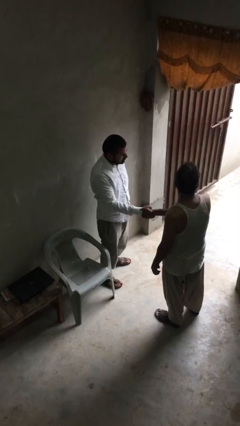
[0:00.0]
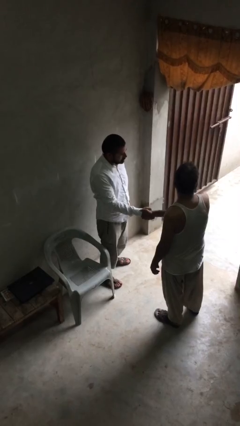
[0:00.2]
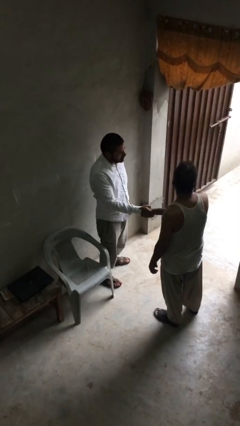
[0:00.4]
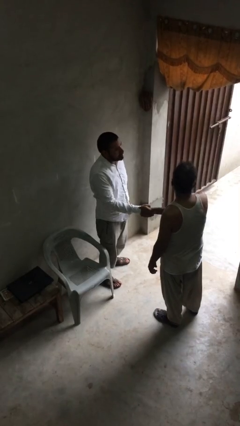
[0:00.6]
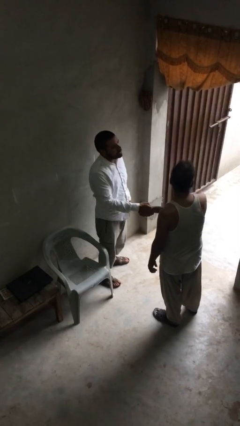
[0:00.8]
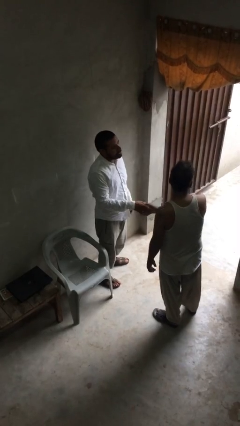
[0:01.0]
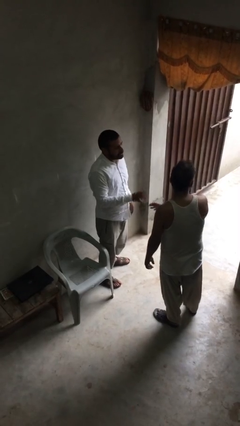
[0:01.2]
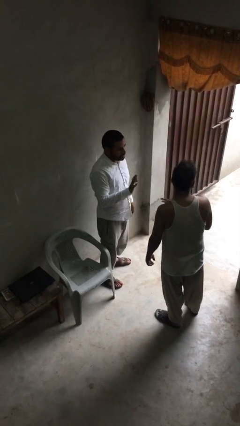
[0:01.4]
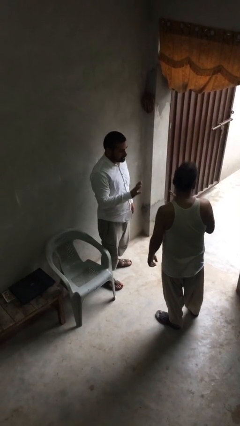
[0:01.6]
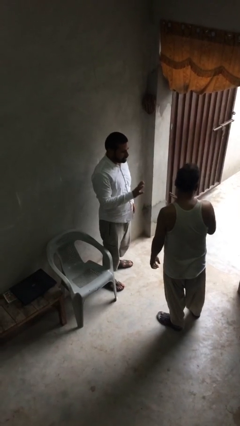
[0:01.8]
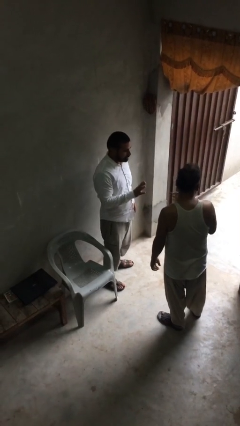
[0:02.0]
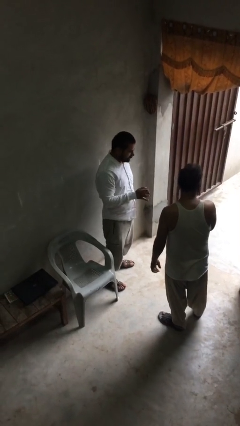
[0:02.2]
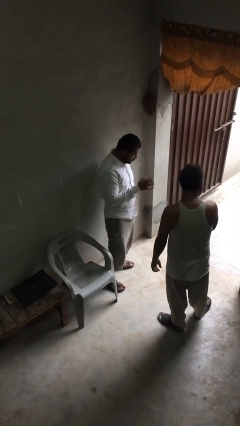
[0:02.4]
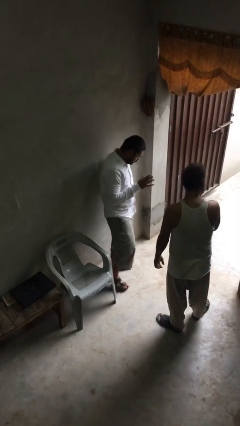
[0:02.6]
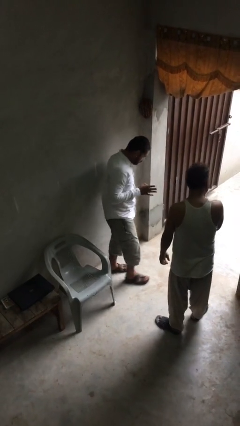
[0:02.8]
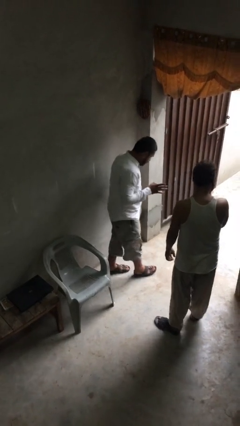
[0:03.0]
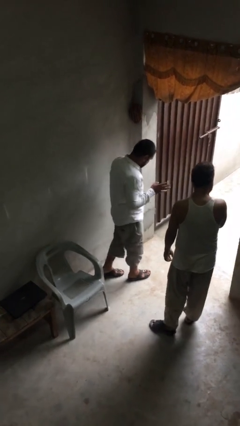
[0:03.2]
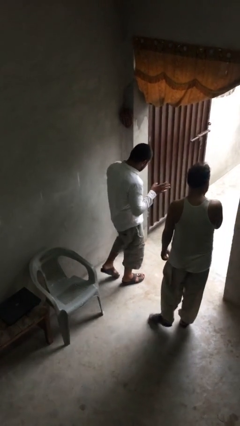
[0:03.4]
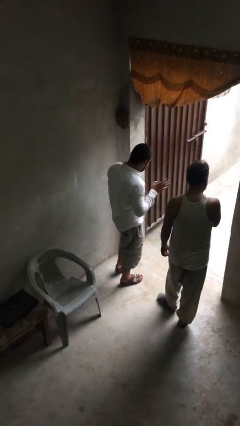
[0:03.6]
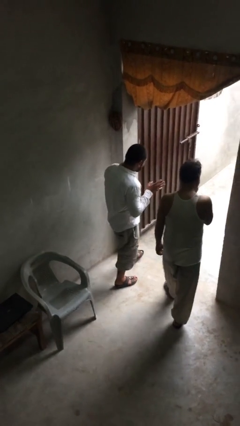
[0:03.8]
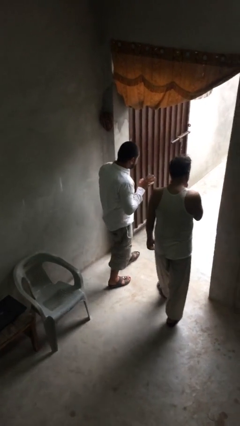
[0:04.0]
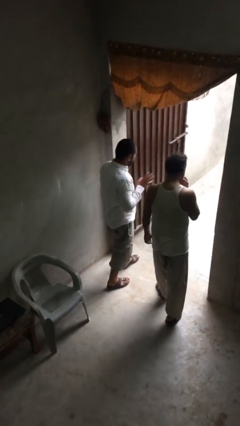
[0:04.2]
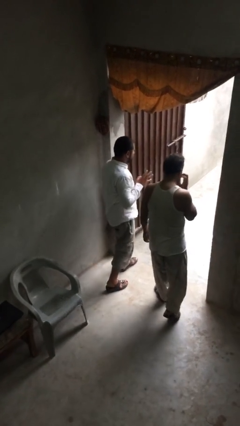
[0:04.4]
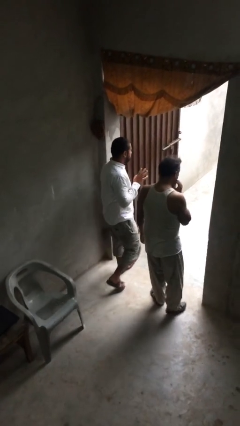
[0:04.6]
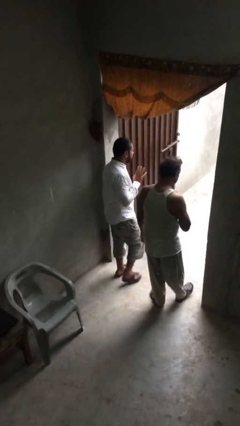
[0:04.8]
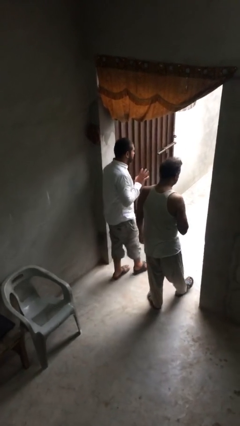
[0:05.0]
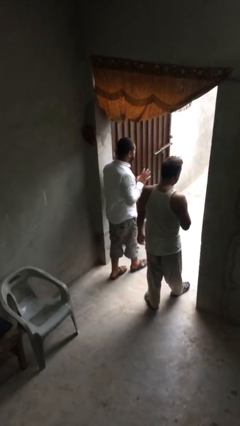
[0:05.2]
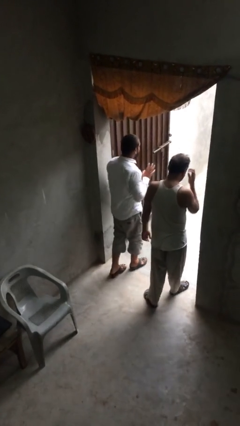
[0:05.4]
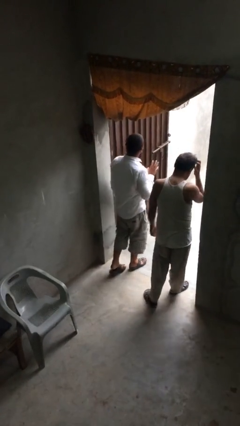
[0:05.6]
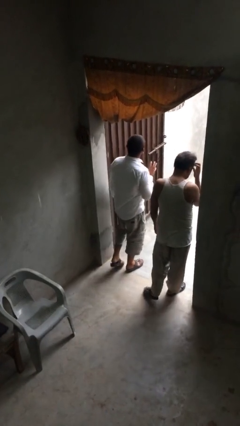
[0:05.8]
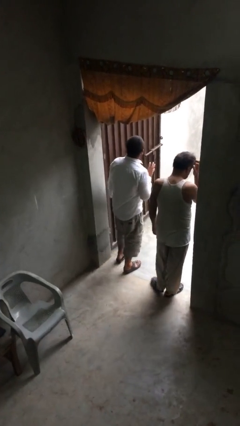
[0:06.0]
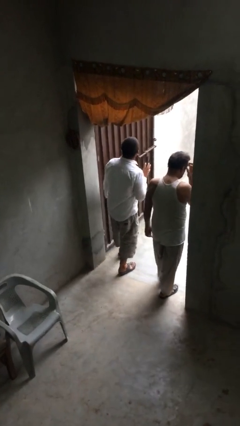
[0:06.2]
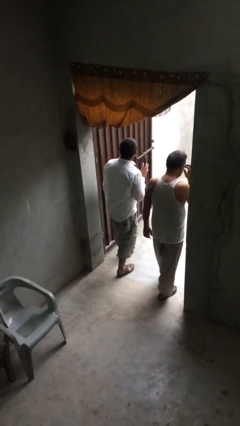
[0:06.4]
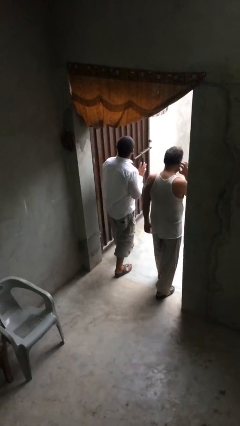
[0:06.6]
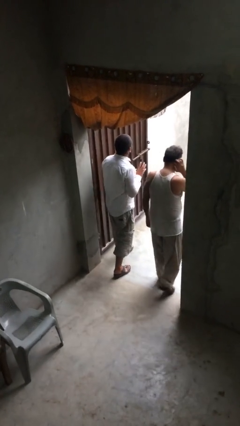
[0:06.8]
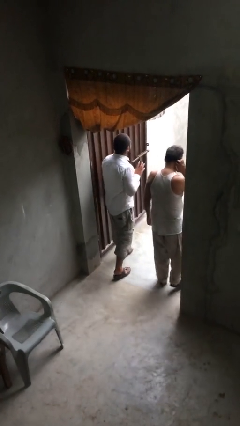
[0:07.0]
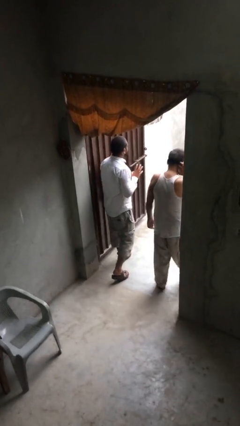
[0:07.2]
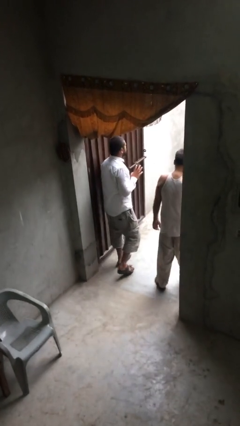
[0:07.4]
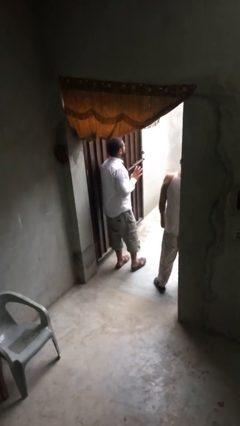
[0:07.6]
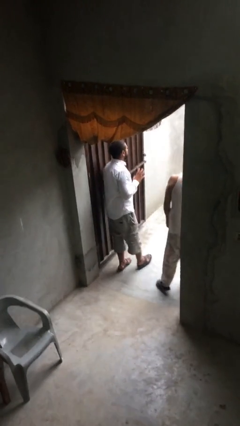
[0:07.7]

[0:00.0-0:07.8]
person talks to person

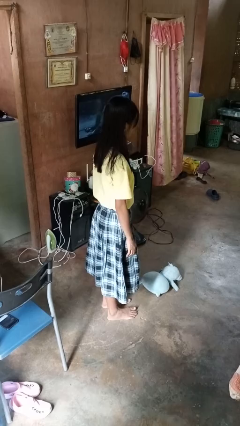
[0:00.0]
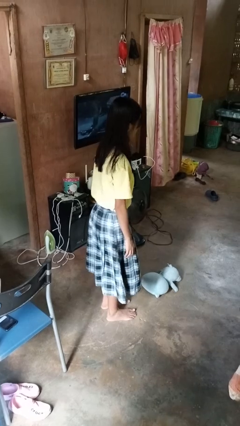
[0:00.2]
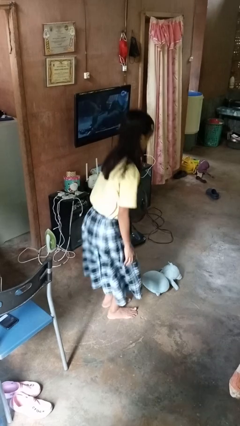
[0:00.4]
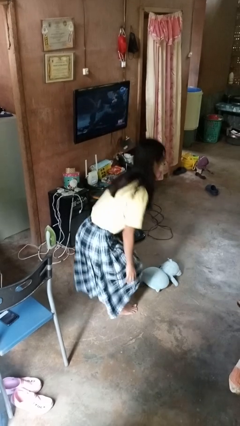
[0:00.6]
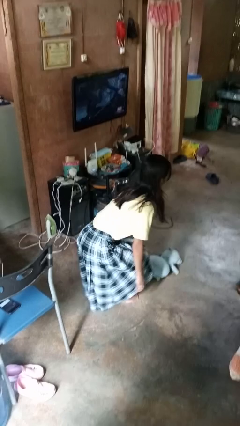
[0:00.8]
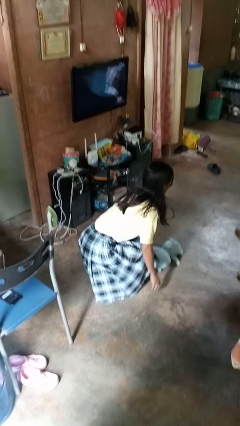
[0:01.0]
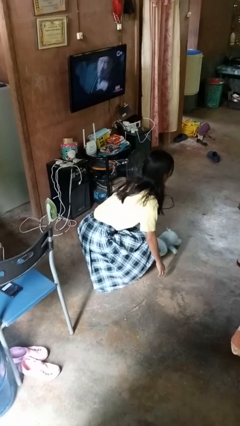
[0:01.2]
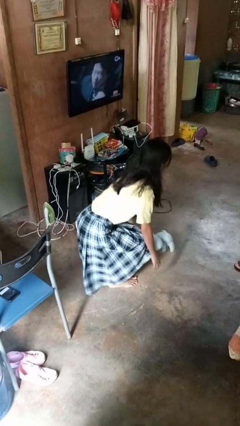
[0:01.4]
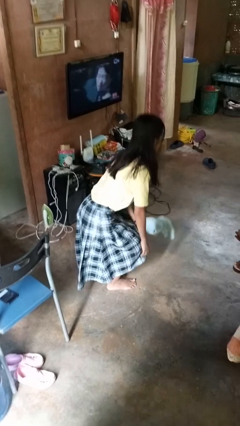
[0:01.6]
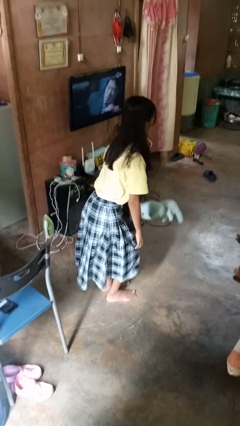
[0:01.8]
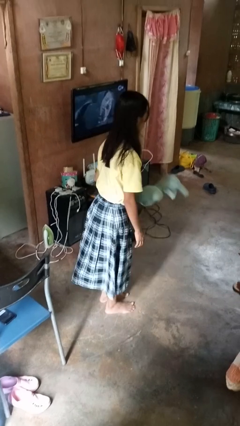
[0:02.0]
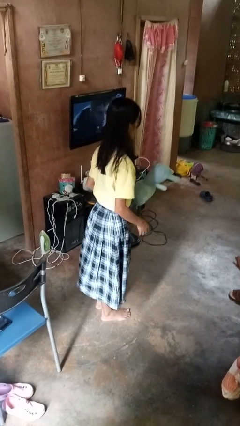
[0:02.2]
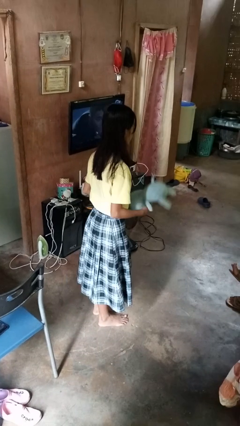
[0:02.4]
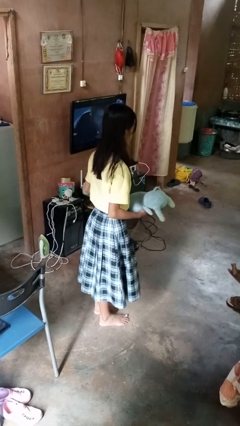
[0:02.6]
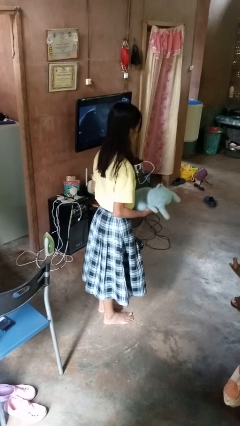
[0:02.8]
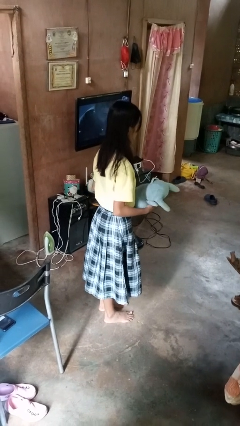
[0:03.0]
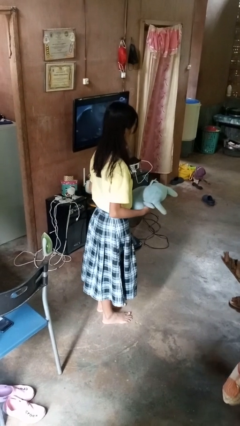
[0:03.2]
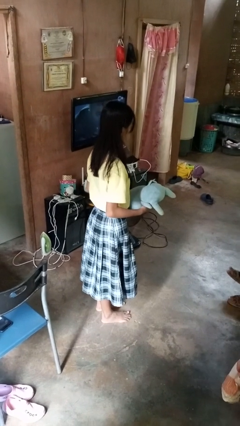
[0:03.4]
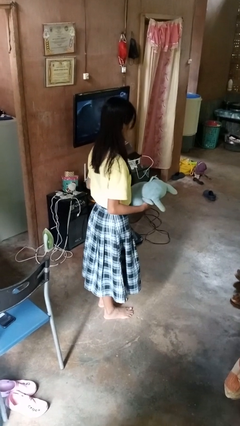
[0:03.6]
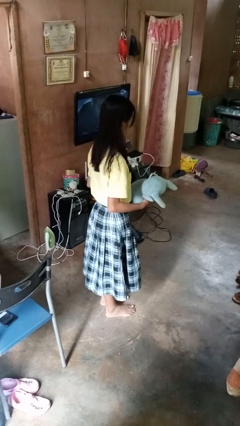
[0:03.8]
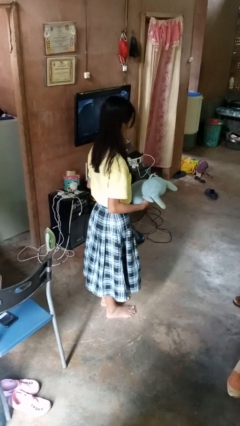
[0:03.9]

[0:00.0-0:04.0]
person picks up object from floor

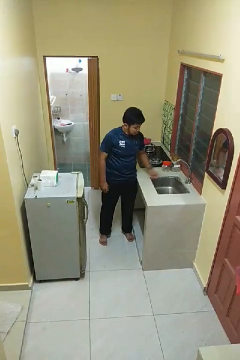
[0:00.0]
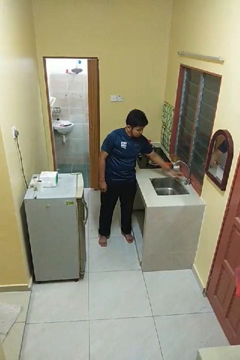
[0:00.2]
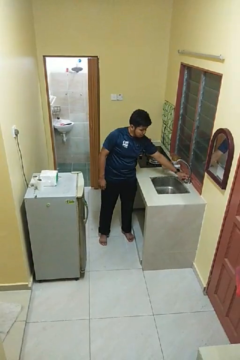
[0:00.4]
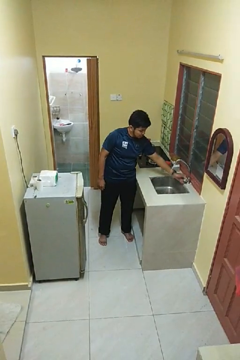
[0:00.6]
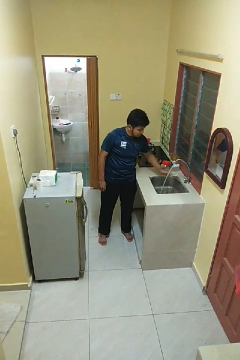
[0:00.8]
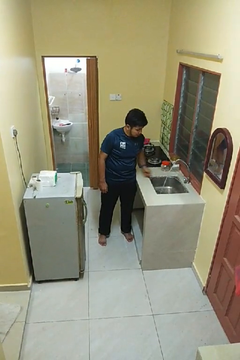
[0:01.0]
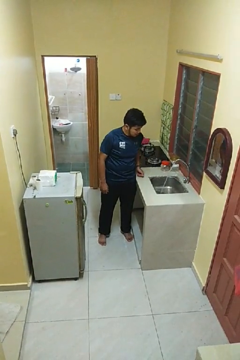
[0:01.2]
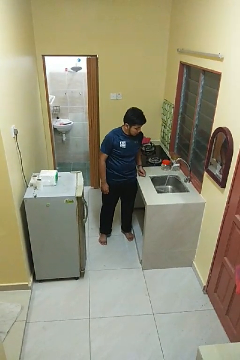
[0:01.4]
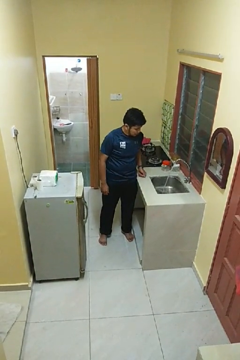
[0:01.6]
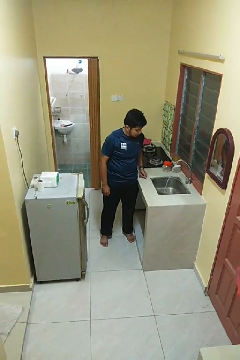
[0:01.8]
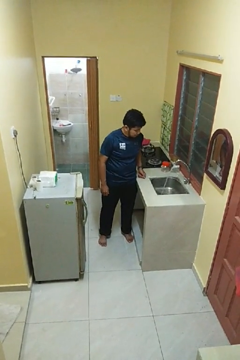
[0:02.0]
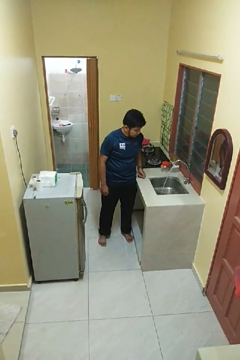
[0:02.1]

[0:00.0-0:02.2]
person turns on faucet

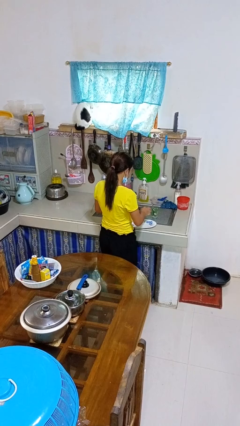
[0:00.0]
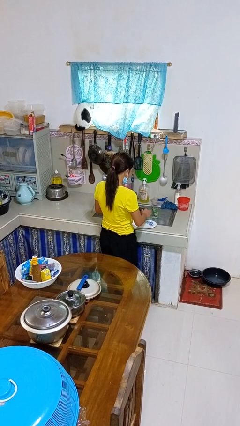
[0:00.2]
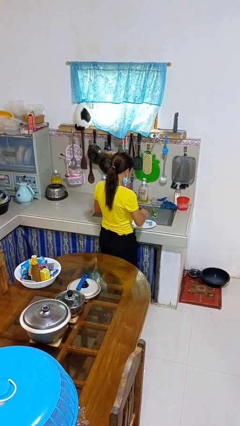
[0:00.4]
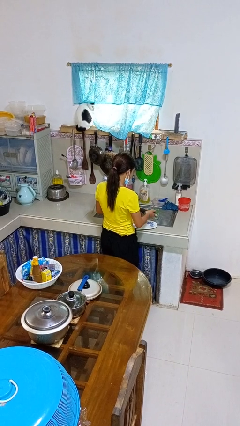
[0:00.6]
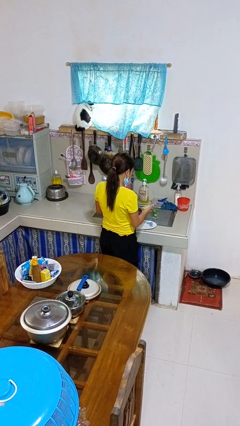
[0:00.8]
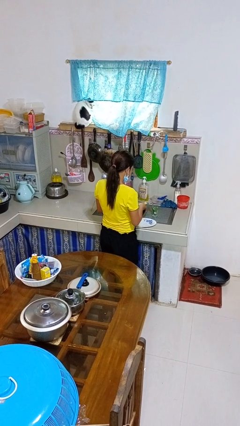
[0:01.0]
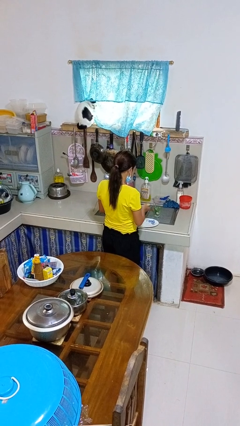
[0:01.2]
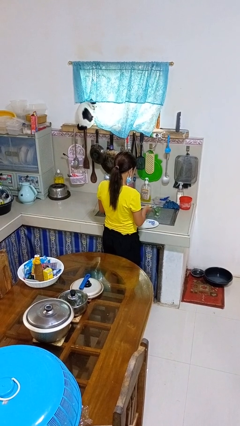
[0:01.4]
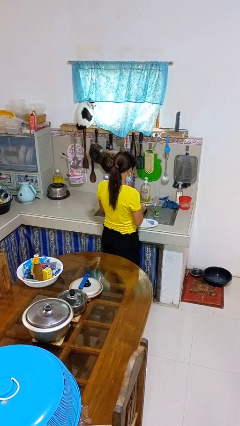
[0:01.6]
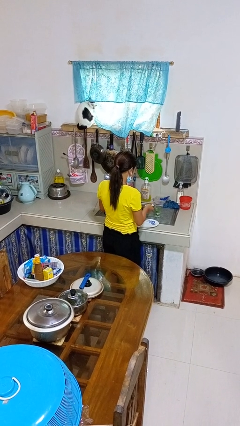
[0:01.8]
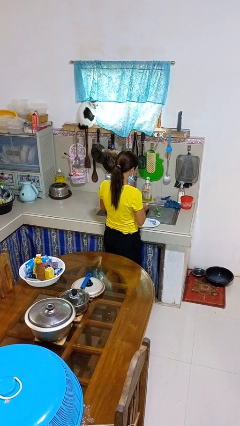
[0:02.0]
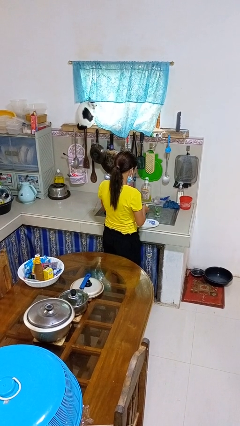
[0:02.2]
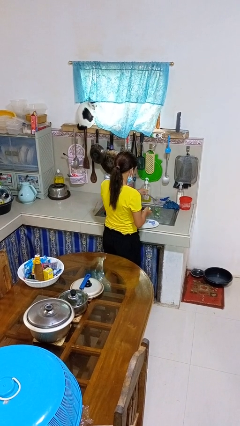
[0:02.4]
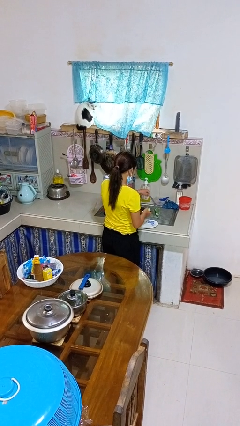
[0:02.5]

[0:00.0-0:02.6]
person washes dish

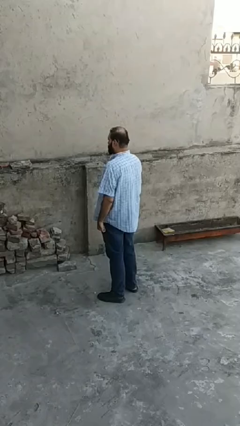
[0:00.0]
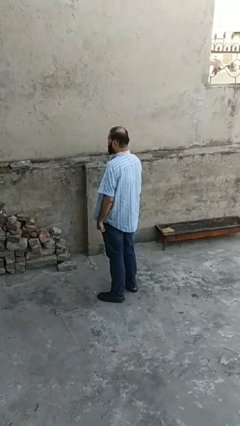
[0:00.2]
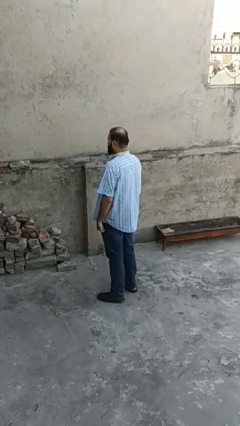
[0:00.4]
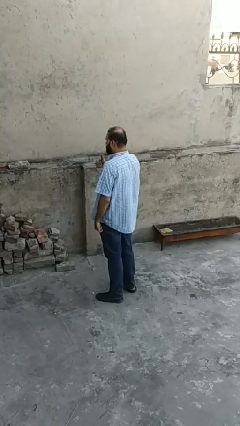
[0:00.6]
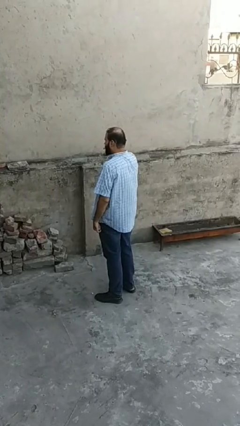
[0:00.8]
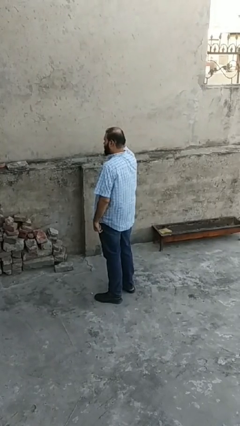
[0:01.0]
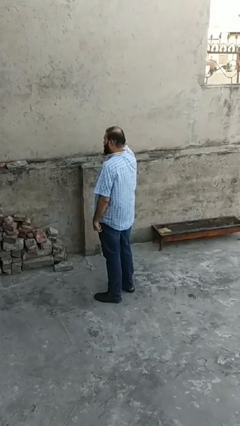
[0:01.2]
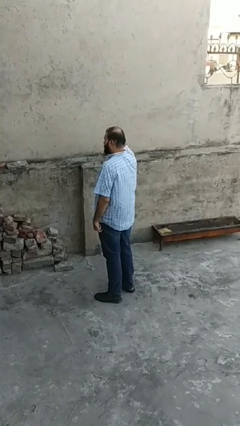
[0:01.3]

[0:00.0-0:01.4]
person gestures call me
